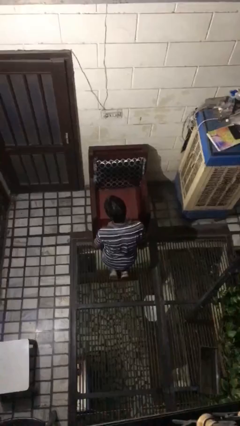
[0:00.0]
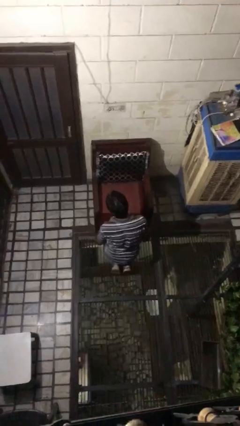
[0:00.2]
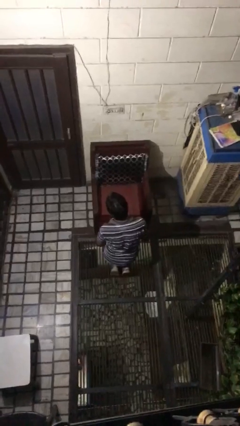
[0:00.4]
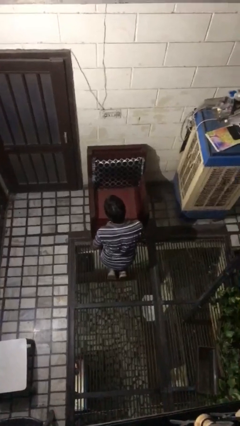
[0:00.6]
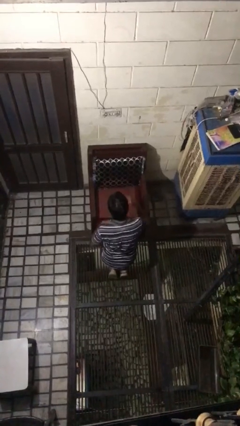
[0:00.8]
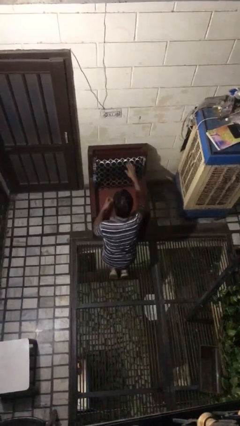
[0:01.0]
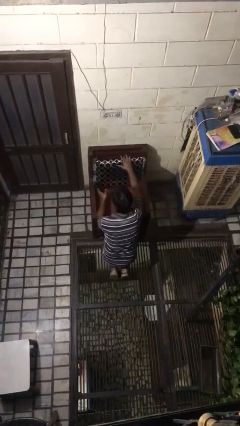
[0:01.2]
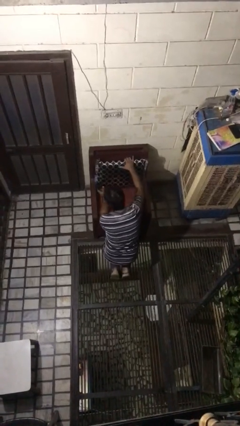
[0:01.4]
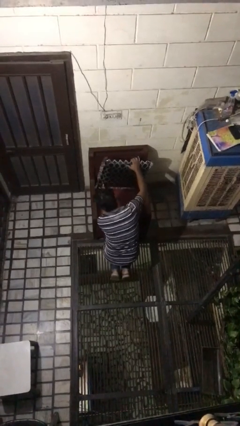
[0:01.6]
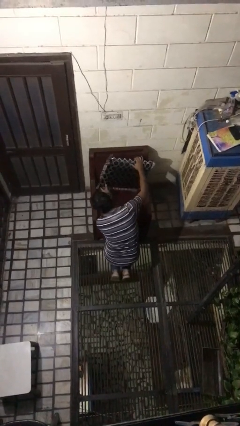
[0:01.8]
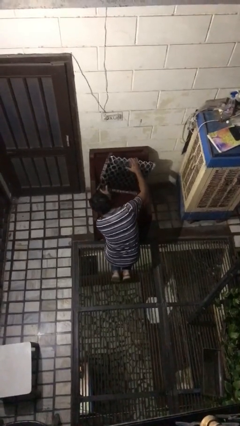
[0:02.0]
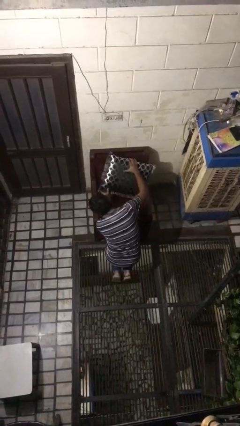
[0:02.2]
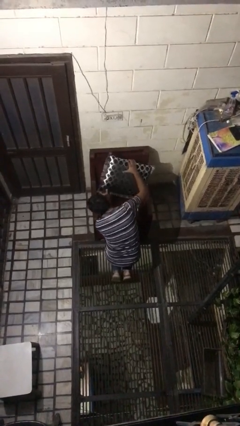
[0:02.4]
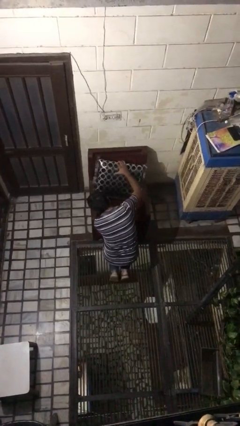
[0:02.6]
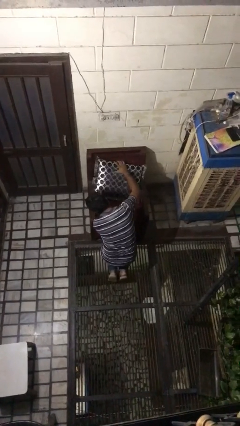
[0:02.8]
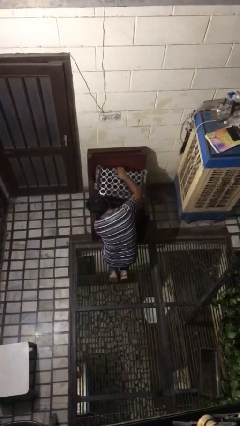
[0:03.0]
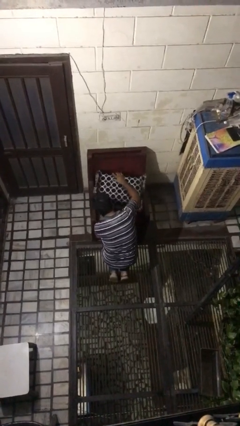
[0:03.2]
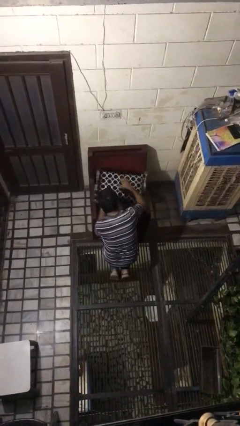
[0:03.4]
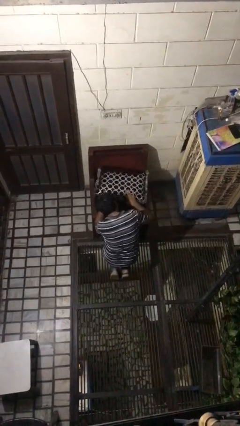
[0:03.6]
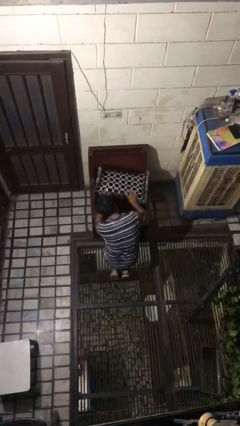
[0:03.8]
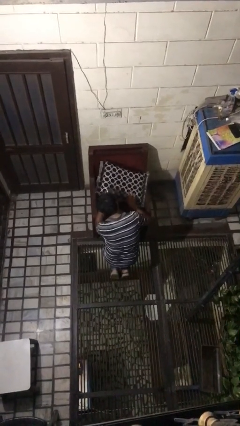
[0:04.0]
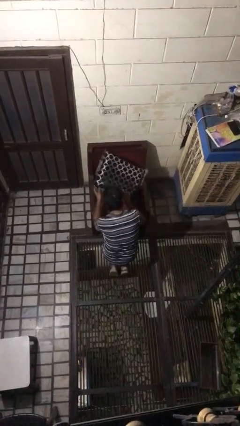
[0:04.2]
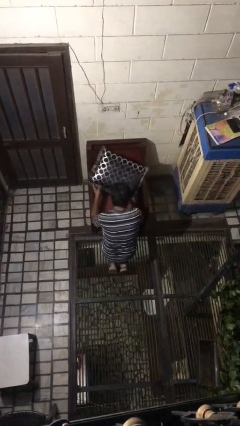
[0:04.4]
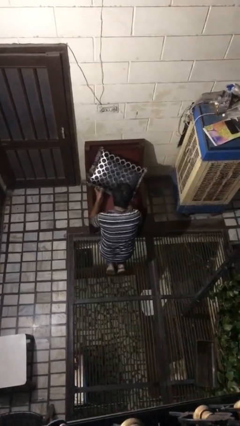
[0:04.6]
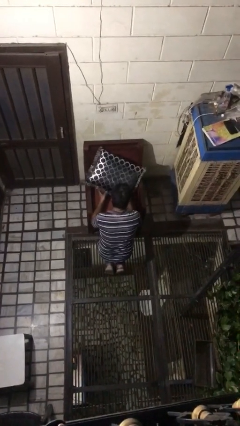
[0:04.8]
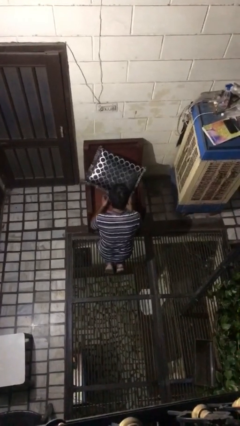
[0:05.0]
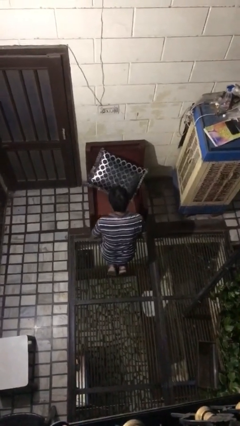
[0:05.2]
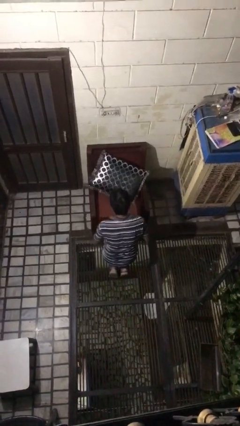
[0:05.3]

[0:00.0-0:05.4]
person searches in couch

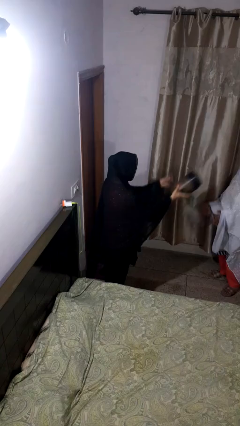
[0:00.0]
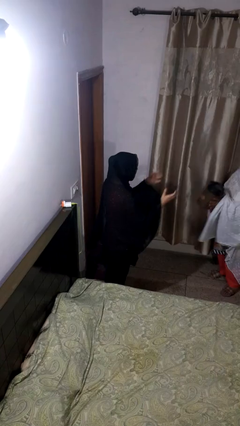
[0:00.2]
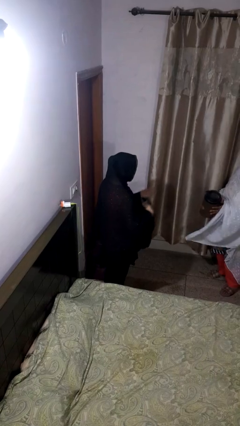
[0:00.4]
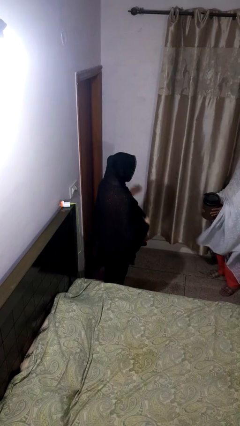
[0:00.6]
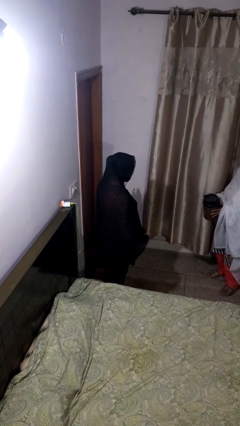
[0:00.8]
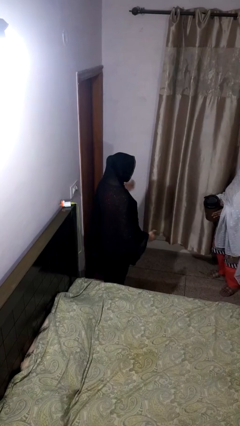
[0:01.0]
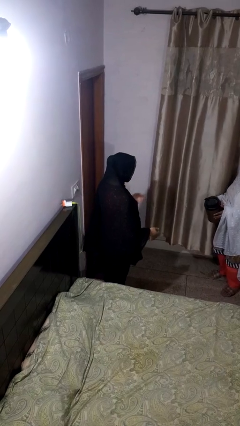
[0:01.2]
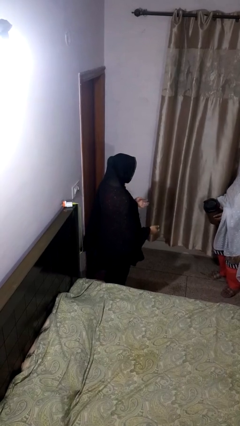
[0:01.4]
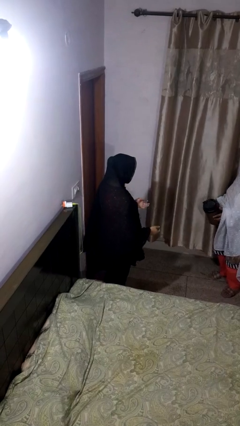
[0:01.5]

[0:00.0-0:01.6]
person throws object to person

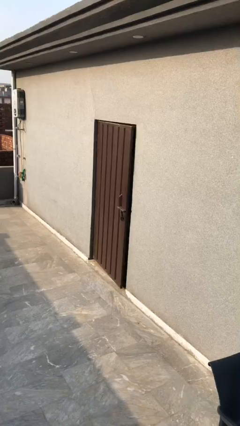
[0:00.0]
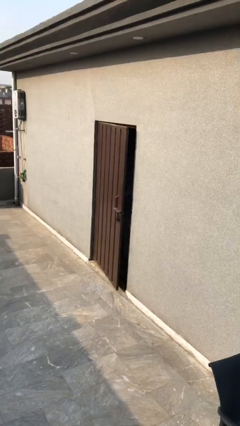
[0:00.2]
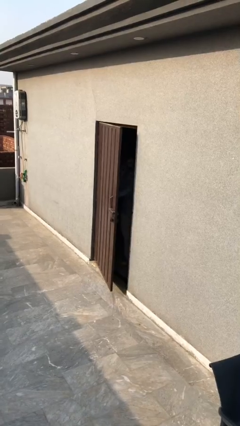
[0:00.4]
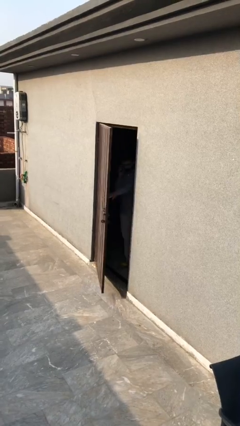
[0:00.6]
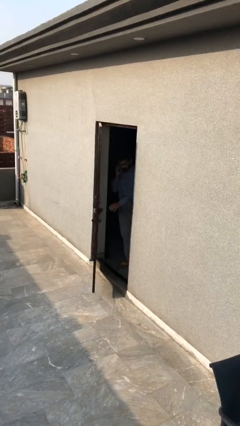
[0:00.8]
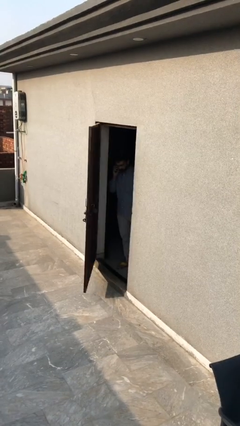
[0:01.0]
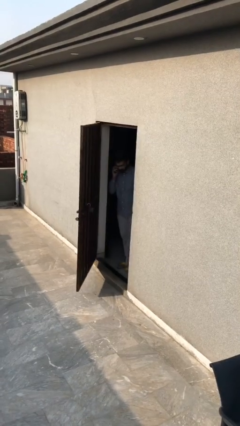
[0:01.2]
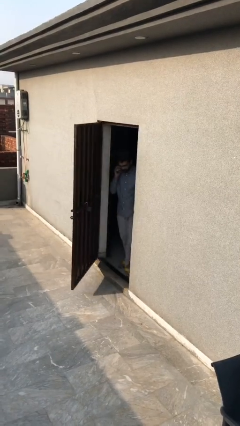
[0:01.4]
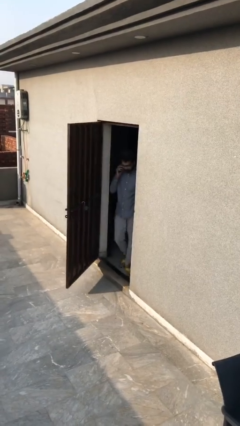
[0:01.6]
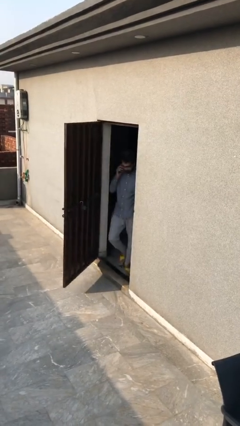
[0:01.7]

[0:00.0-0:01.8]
person opens facility door

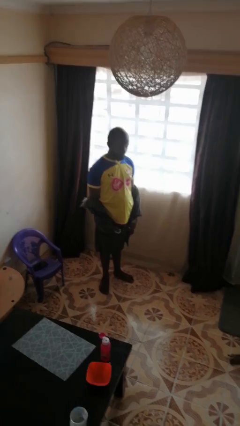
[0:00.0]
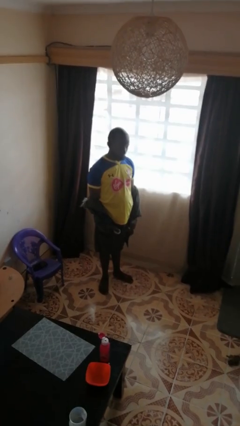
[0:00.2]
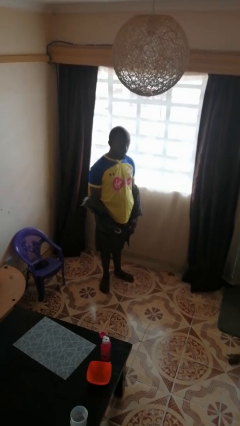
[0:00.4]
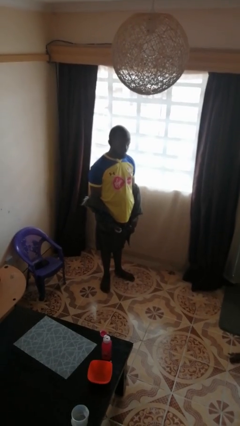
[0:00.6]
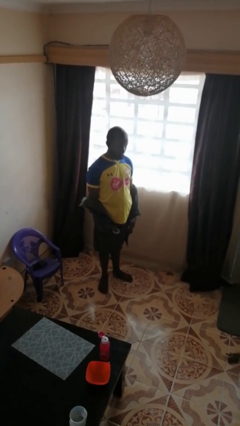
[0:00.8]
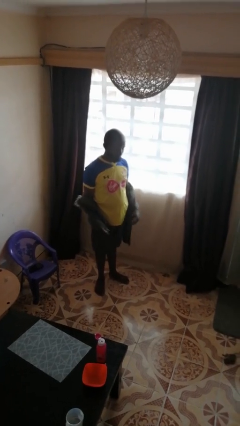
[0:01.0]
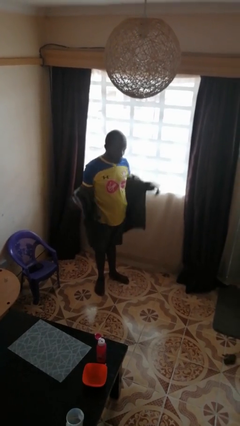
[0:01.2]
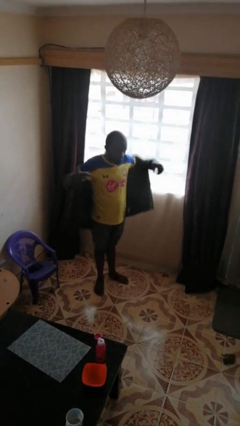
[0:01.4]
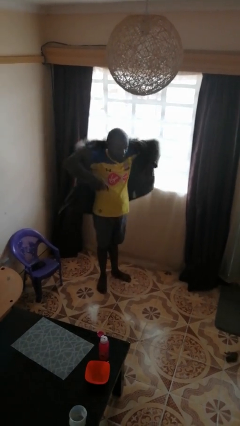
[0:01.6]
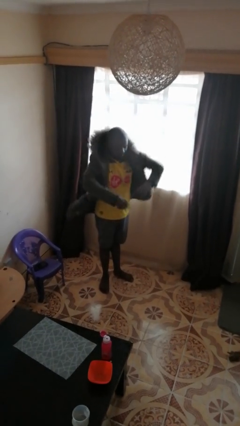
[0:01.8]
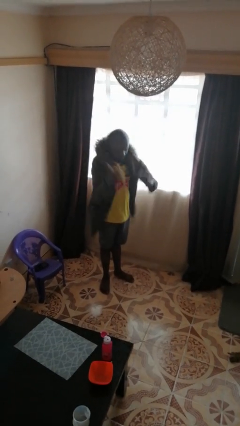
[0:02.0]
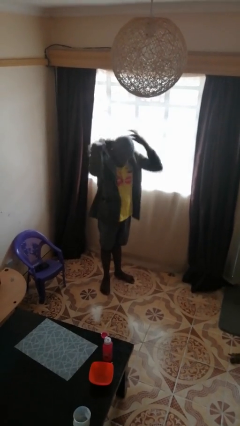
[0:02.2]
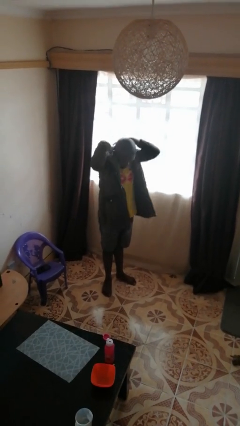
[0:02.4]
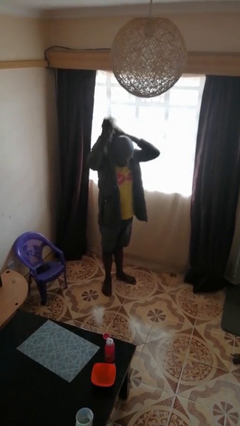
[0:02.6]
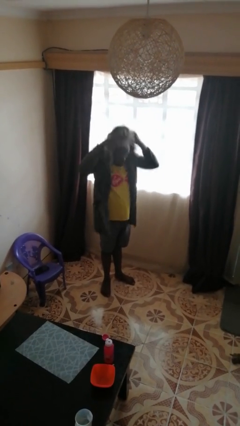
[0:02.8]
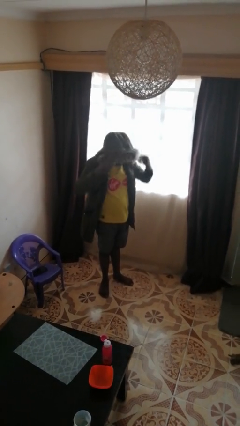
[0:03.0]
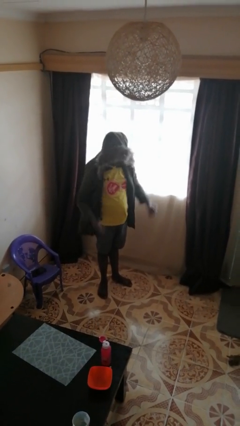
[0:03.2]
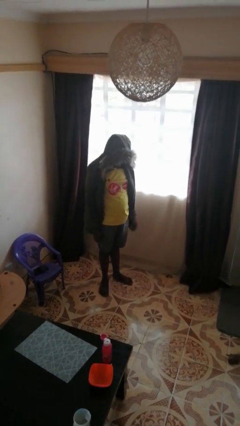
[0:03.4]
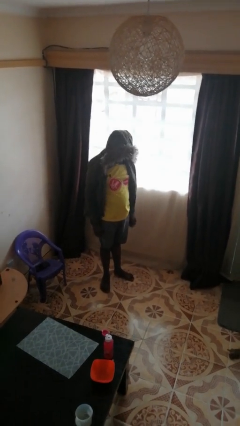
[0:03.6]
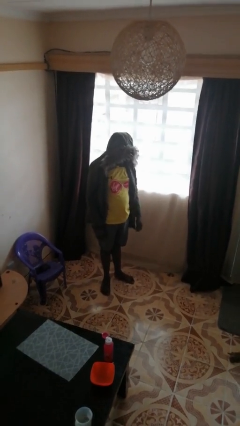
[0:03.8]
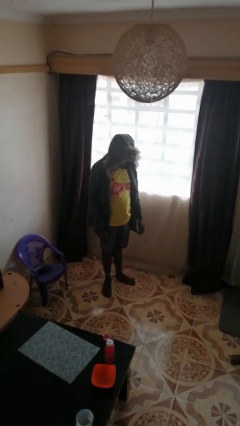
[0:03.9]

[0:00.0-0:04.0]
person puts on hoodie

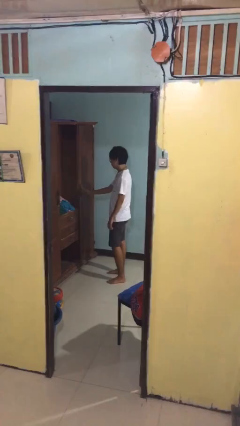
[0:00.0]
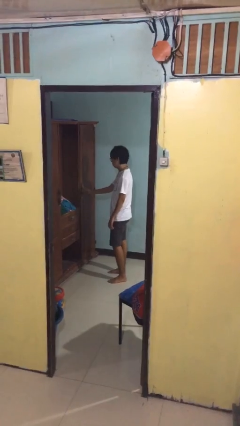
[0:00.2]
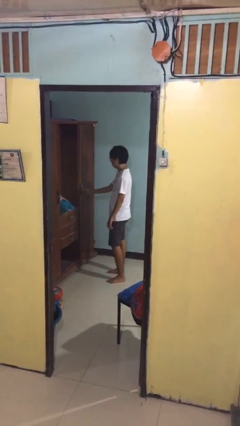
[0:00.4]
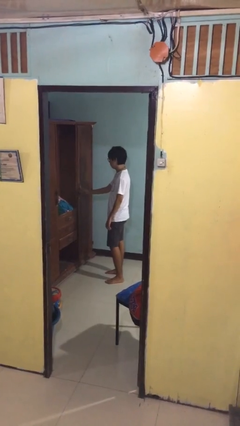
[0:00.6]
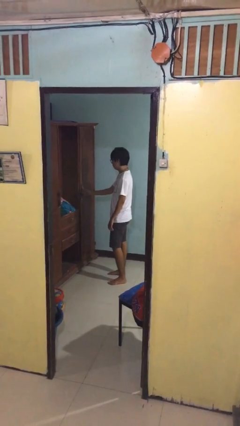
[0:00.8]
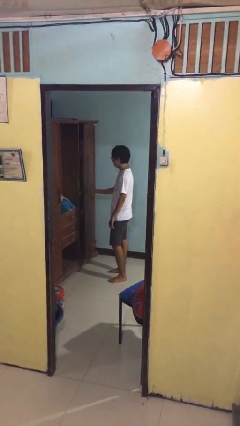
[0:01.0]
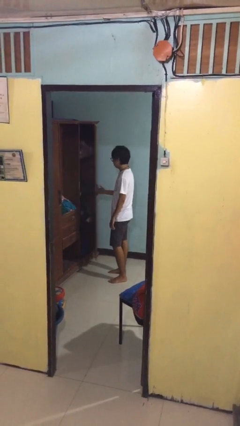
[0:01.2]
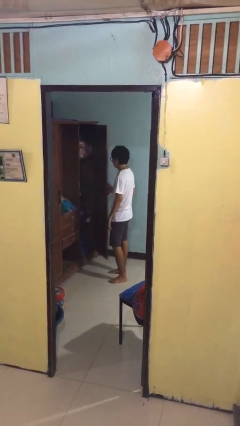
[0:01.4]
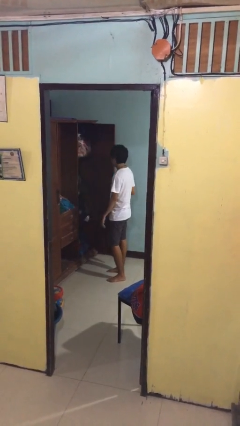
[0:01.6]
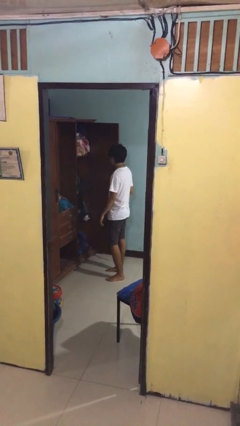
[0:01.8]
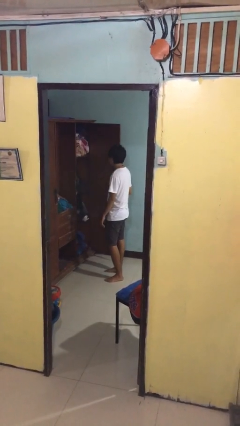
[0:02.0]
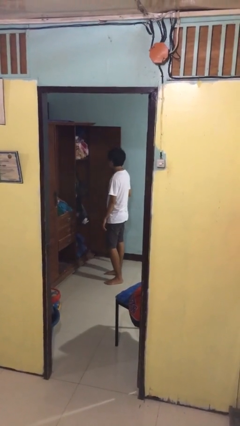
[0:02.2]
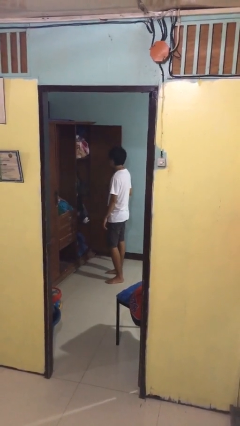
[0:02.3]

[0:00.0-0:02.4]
person opens closet door

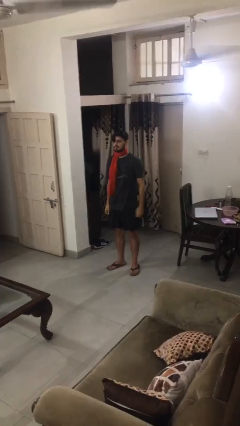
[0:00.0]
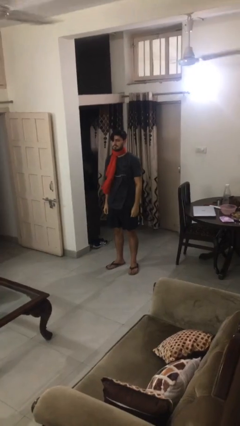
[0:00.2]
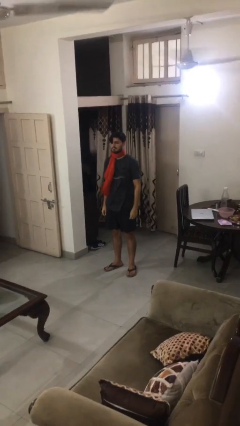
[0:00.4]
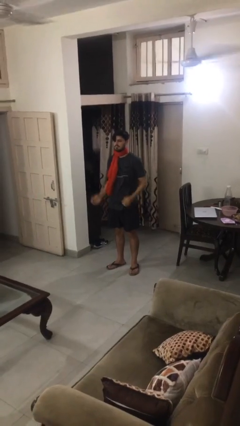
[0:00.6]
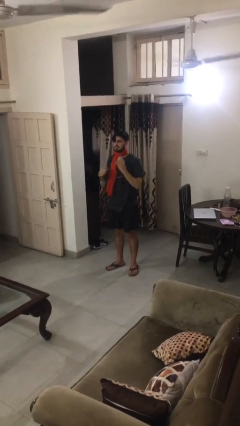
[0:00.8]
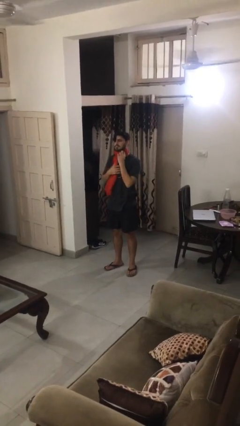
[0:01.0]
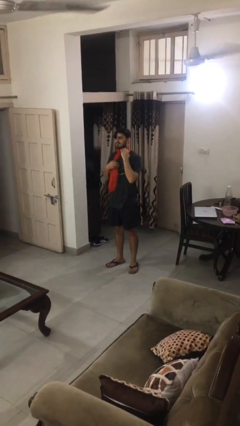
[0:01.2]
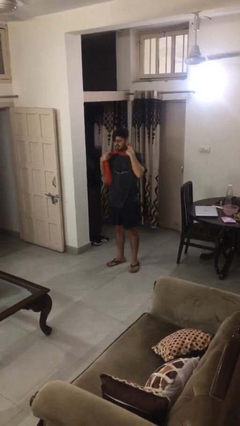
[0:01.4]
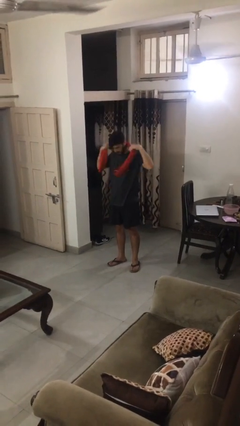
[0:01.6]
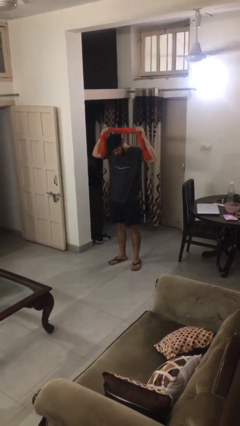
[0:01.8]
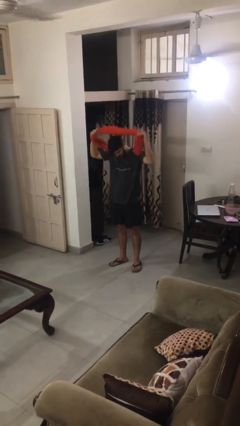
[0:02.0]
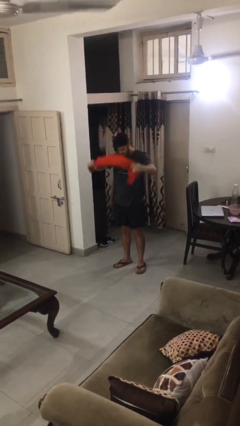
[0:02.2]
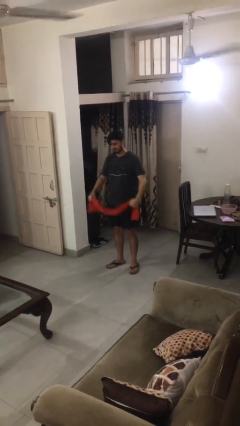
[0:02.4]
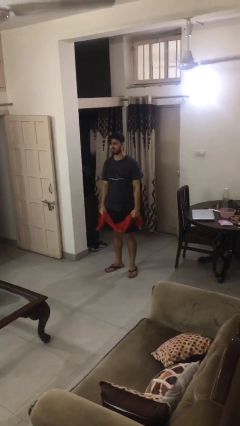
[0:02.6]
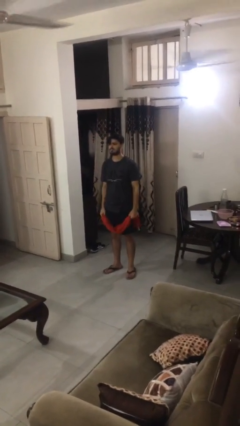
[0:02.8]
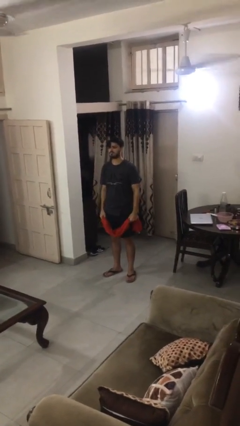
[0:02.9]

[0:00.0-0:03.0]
person takes off scarf
